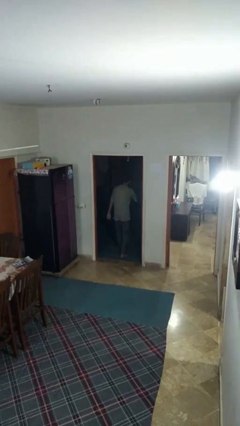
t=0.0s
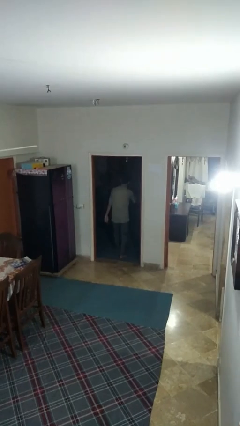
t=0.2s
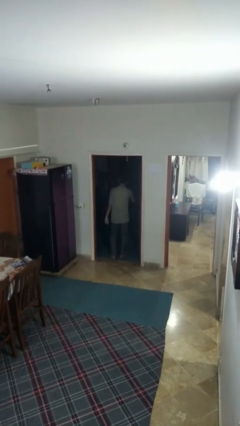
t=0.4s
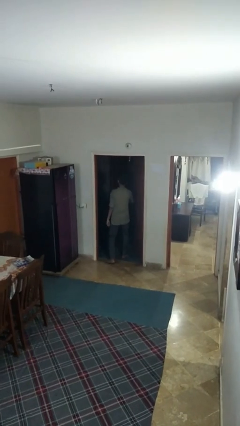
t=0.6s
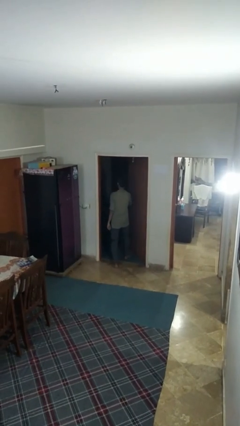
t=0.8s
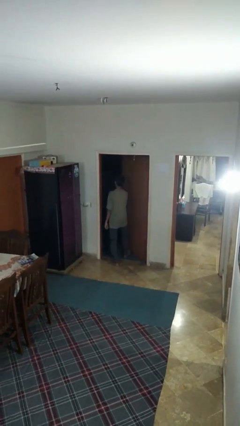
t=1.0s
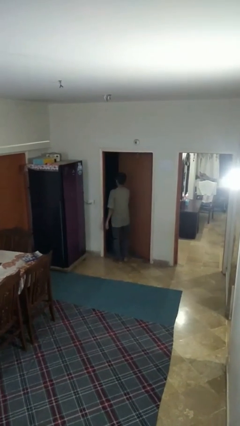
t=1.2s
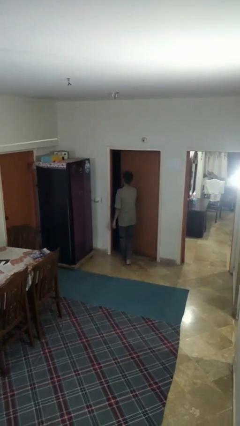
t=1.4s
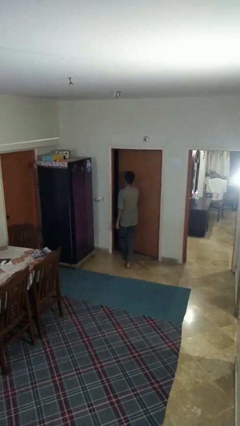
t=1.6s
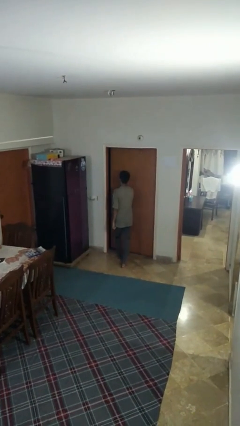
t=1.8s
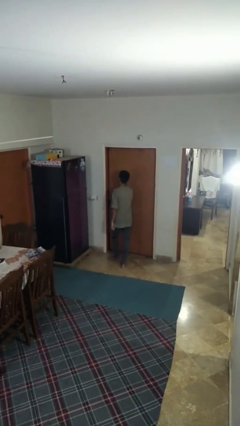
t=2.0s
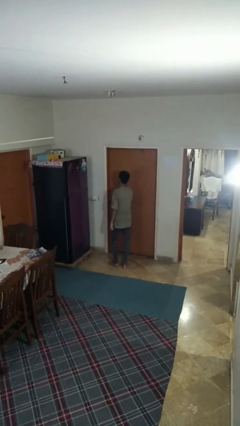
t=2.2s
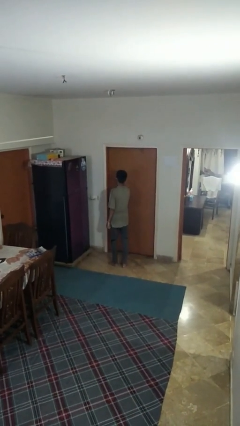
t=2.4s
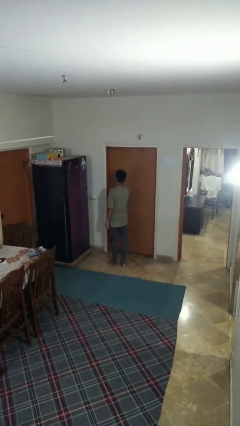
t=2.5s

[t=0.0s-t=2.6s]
person closes facility door

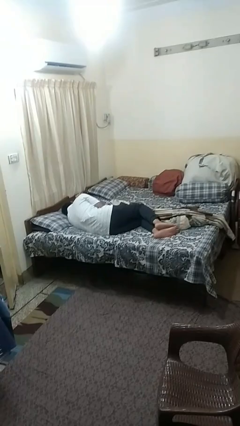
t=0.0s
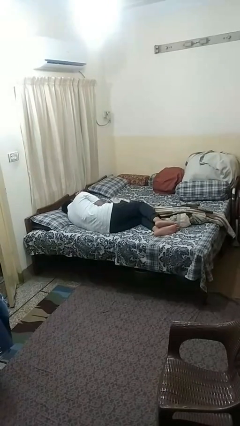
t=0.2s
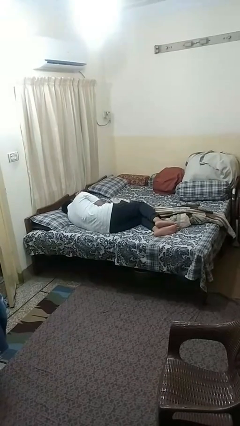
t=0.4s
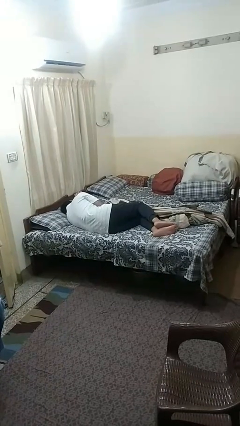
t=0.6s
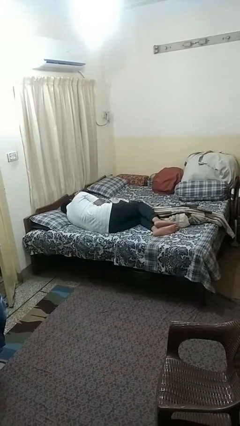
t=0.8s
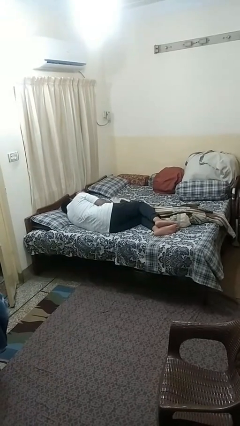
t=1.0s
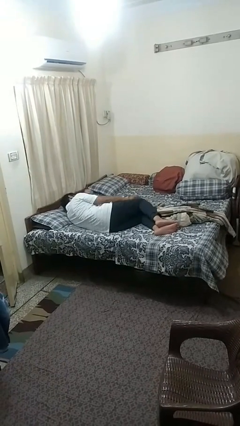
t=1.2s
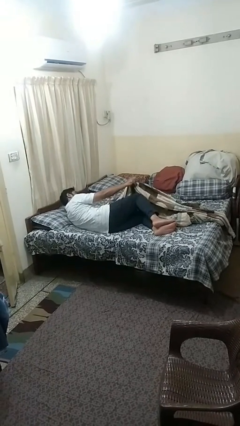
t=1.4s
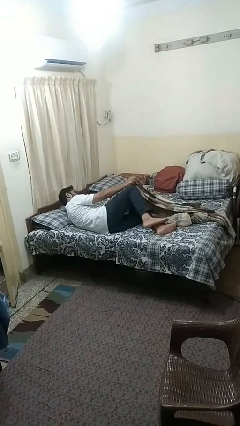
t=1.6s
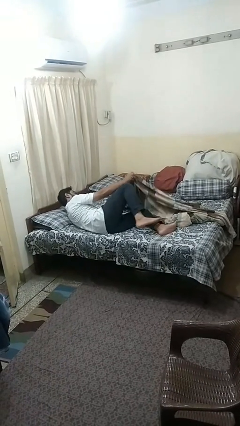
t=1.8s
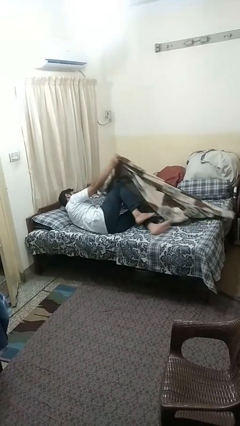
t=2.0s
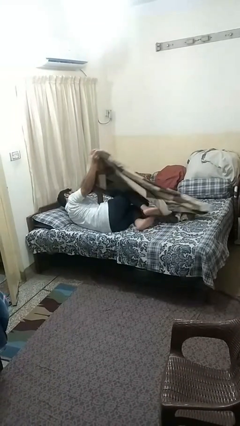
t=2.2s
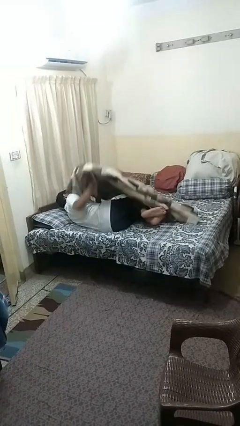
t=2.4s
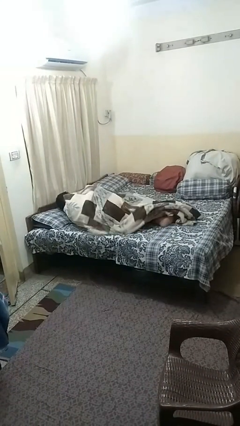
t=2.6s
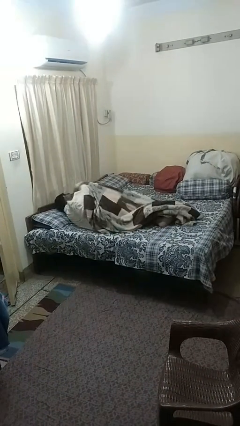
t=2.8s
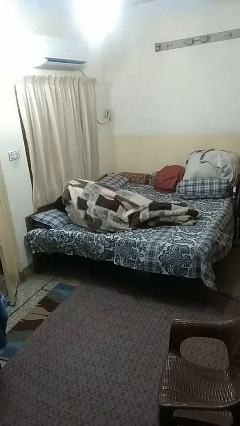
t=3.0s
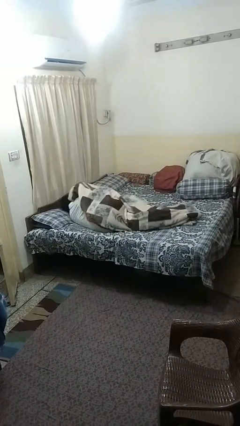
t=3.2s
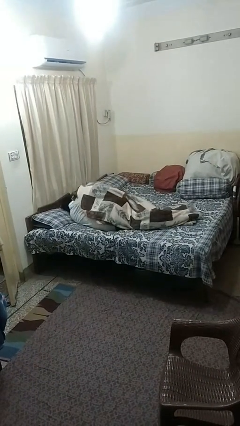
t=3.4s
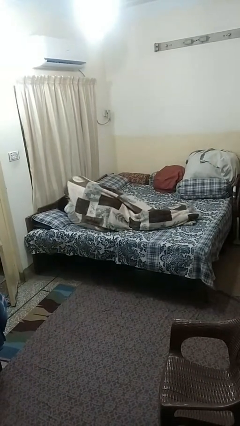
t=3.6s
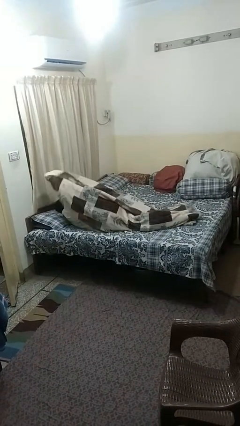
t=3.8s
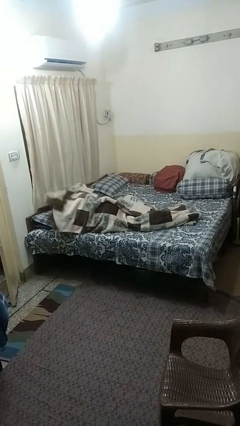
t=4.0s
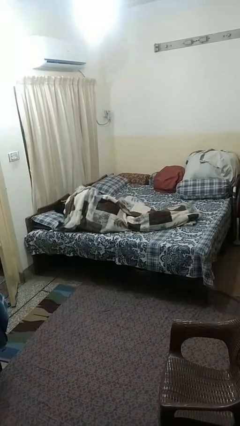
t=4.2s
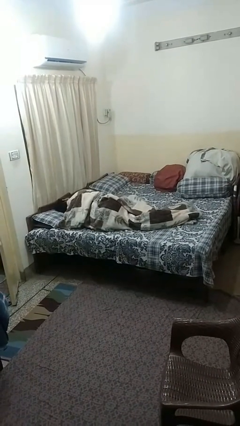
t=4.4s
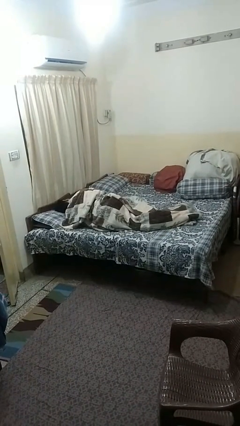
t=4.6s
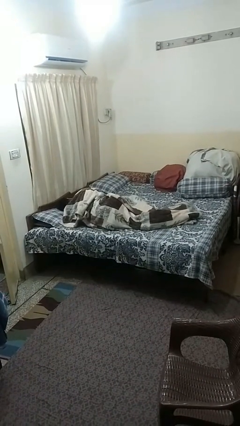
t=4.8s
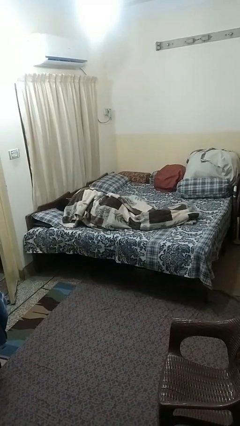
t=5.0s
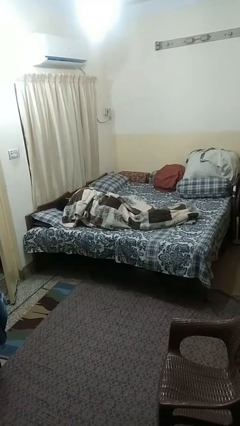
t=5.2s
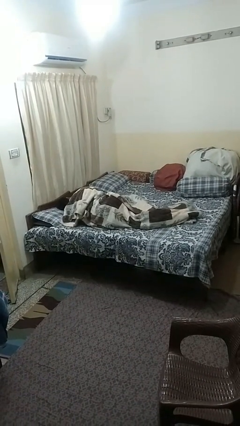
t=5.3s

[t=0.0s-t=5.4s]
person covers with blanket

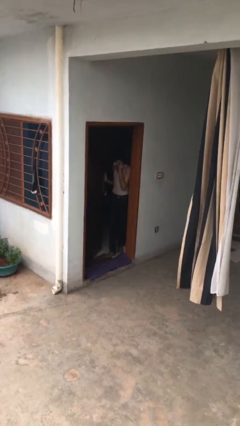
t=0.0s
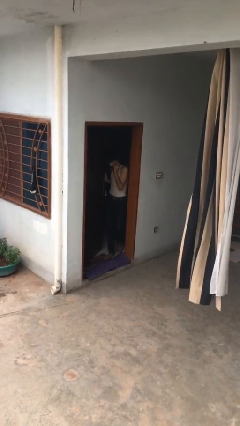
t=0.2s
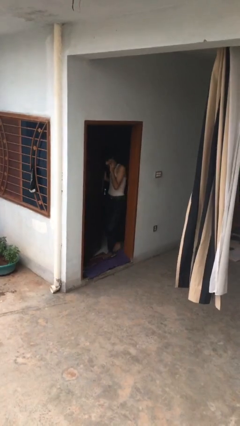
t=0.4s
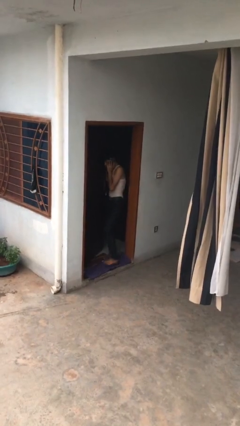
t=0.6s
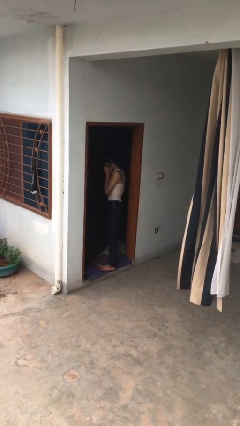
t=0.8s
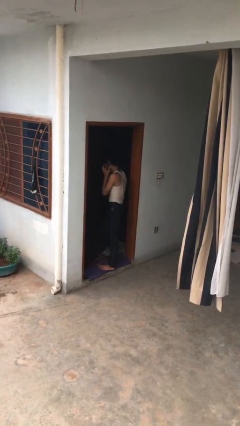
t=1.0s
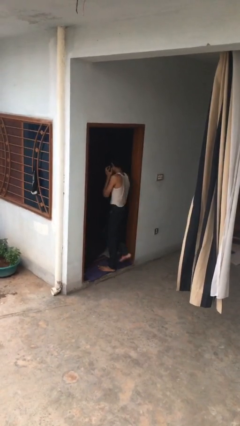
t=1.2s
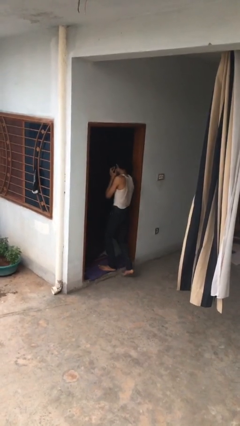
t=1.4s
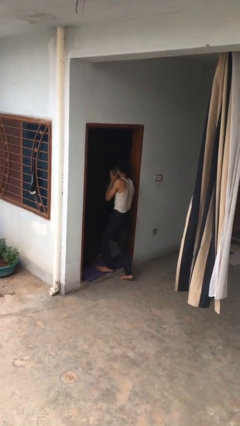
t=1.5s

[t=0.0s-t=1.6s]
person enters scene through structure

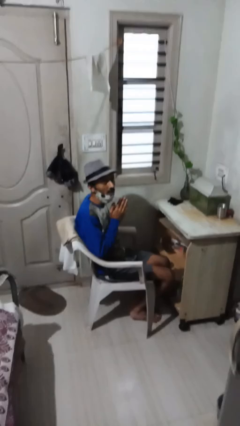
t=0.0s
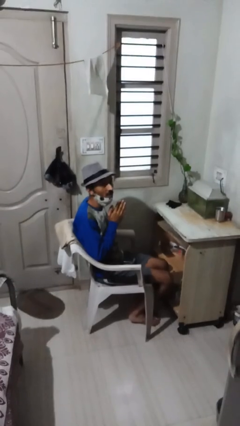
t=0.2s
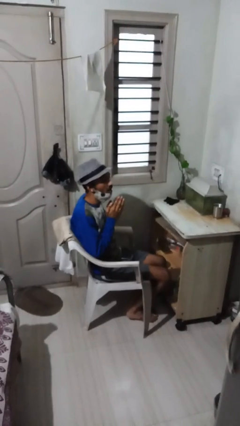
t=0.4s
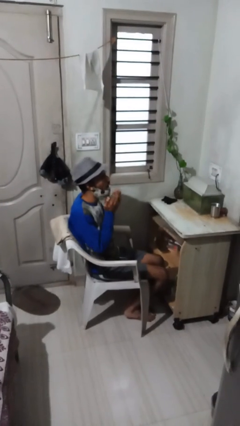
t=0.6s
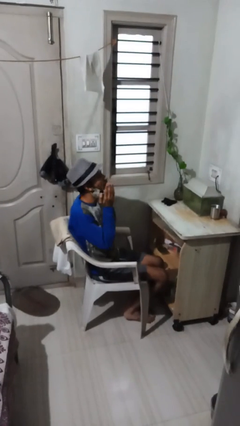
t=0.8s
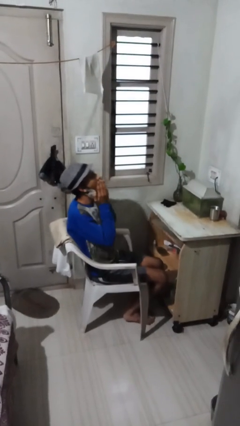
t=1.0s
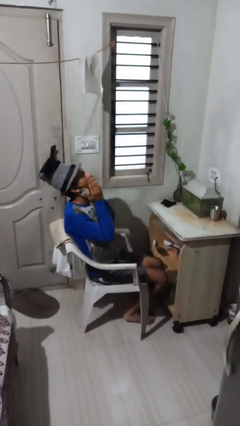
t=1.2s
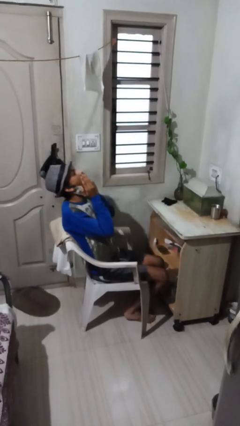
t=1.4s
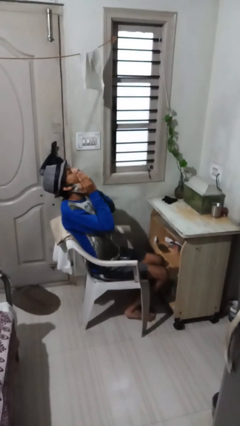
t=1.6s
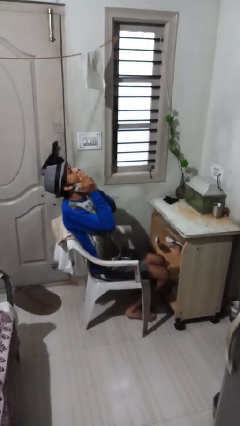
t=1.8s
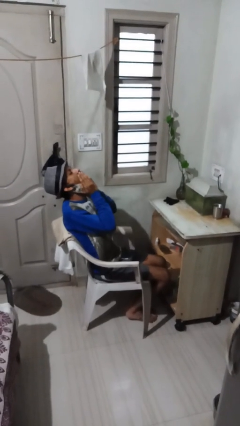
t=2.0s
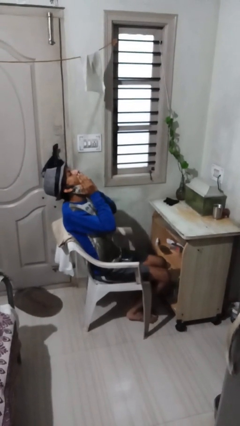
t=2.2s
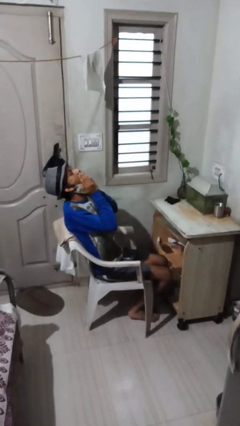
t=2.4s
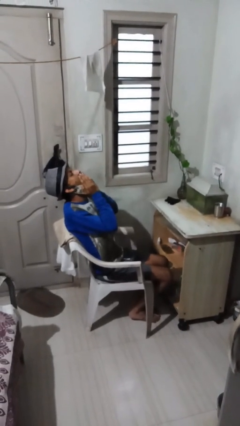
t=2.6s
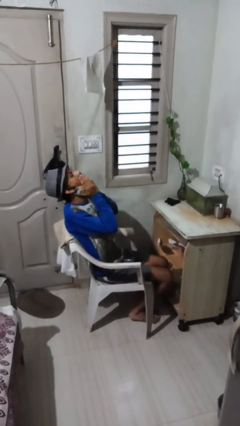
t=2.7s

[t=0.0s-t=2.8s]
person yawns

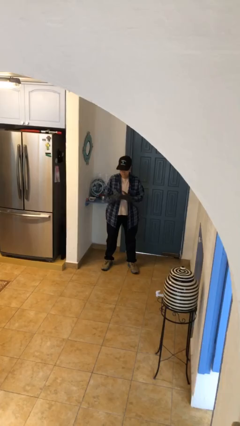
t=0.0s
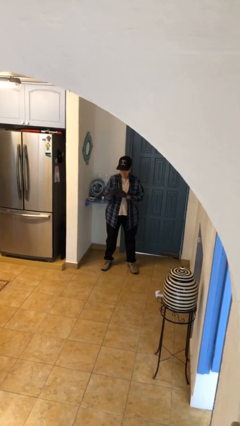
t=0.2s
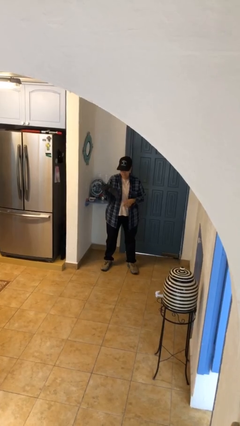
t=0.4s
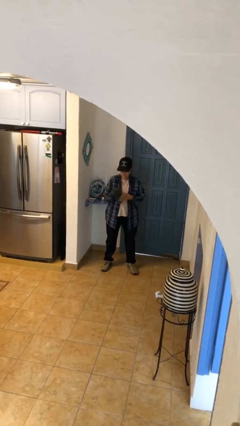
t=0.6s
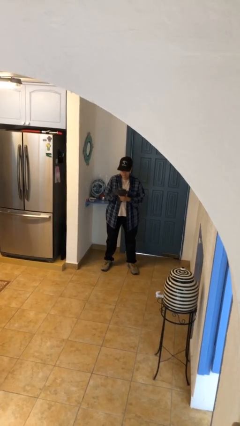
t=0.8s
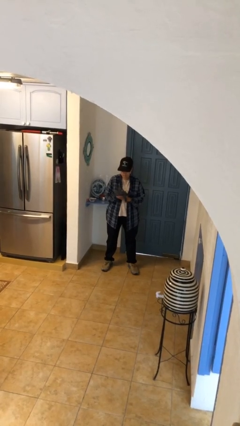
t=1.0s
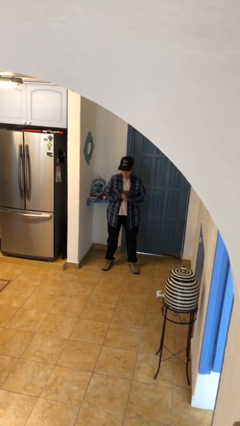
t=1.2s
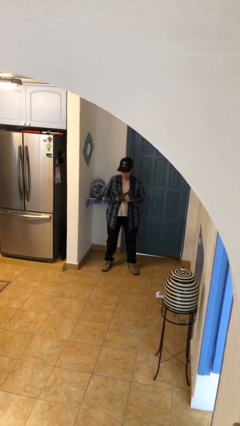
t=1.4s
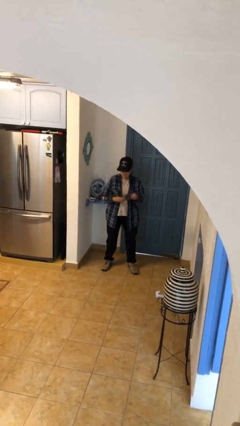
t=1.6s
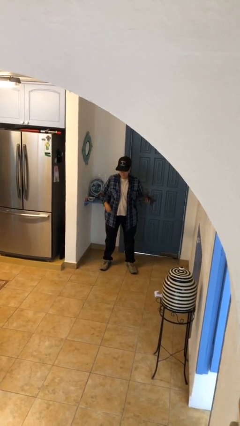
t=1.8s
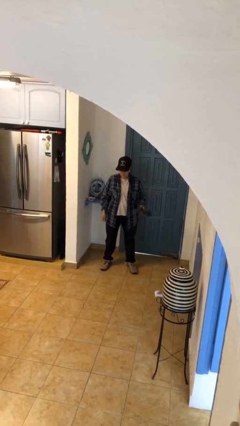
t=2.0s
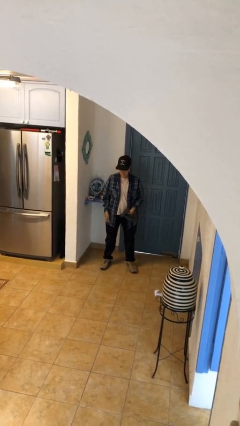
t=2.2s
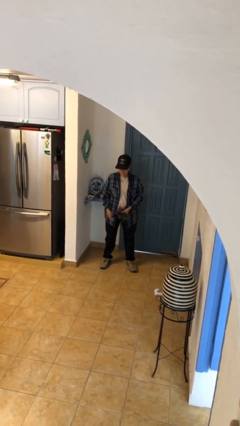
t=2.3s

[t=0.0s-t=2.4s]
person takes off gloves

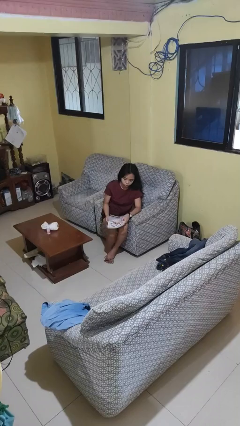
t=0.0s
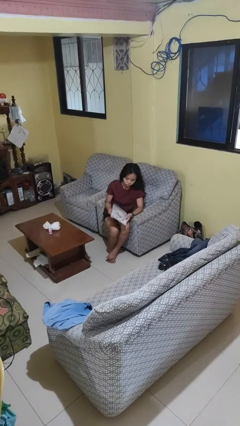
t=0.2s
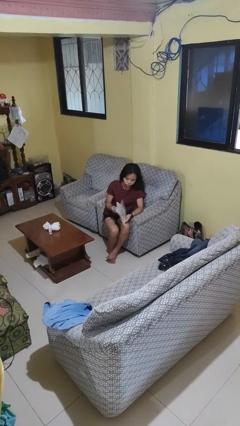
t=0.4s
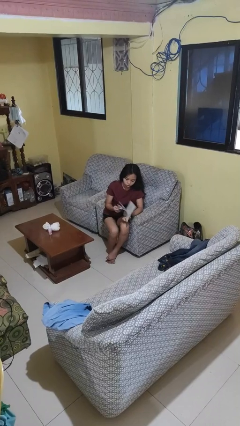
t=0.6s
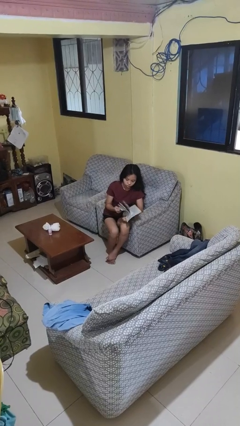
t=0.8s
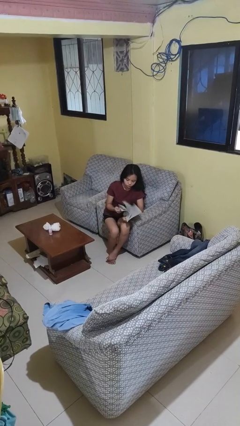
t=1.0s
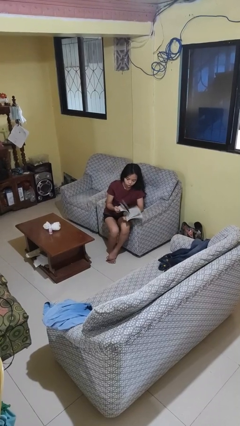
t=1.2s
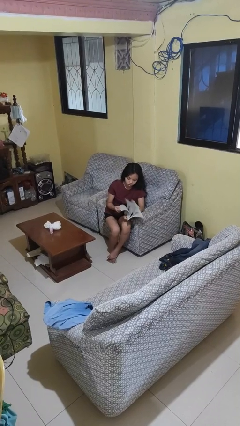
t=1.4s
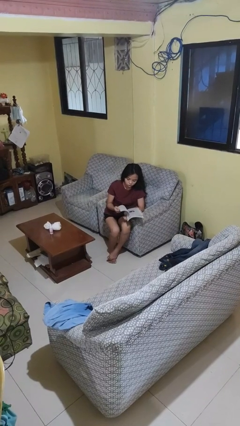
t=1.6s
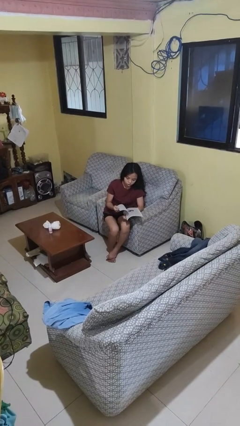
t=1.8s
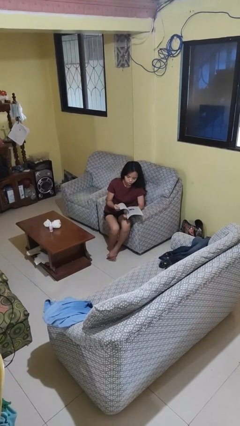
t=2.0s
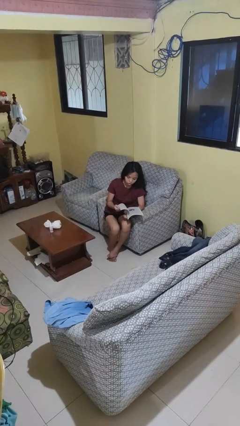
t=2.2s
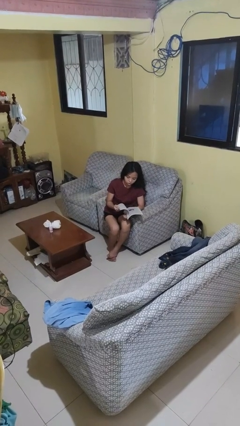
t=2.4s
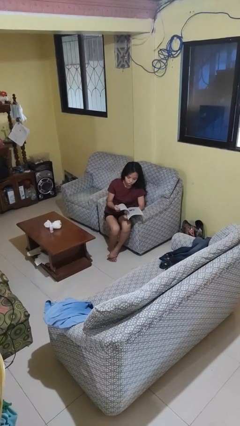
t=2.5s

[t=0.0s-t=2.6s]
person reads book

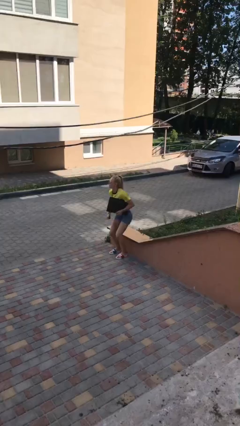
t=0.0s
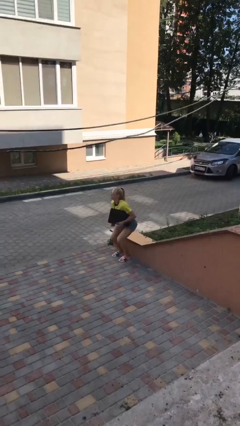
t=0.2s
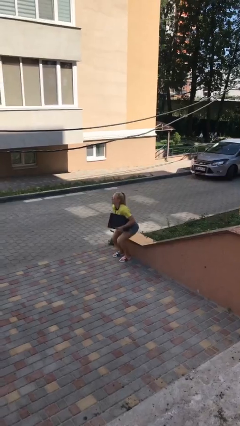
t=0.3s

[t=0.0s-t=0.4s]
person sits down
